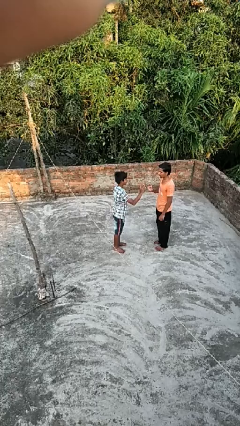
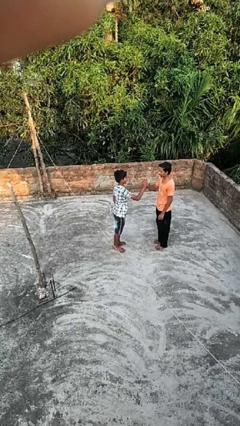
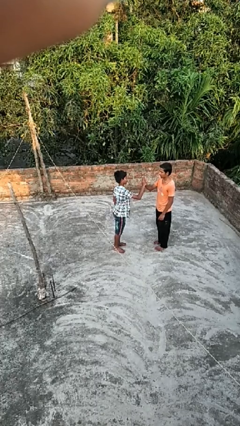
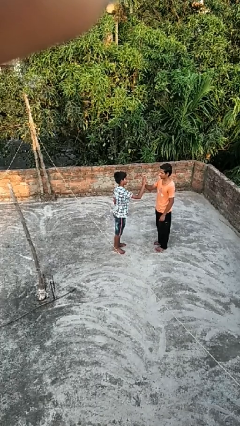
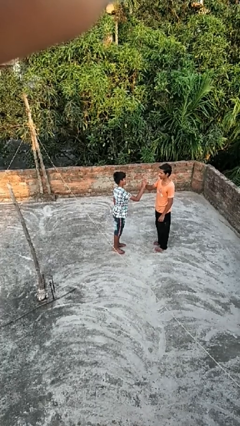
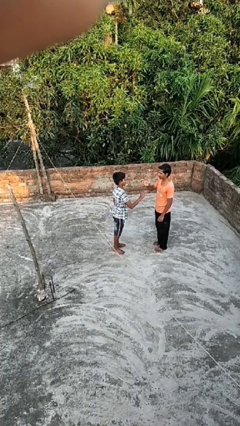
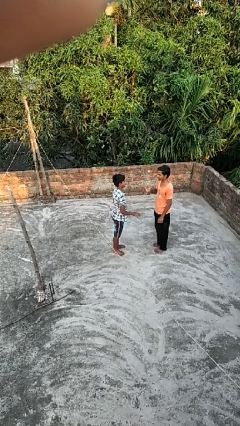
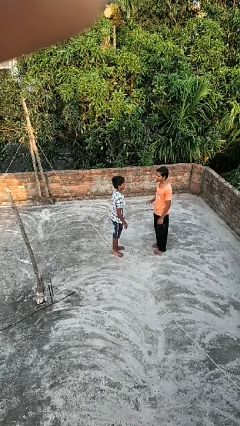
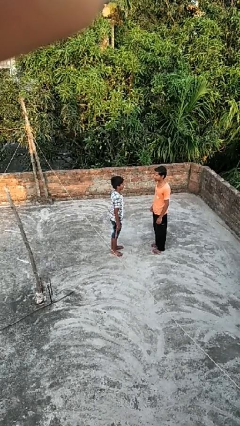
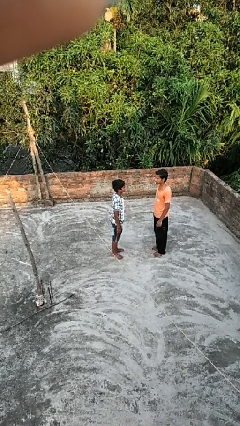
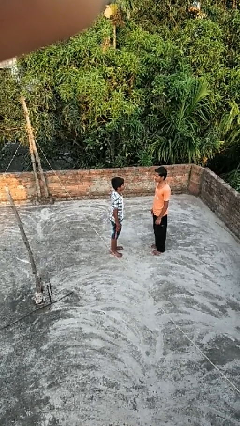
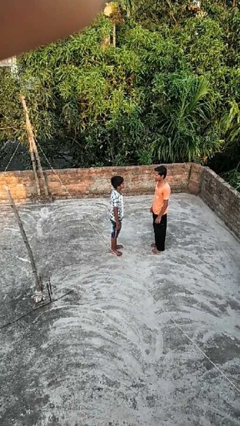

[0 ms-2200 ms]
person highfives hand

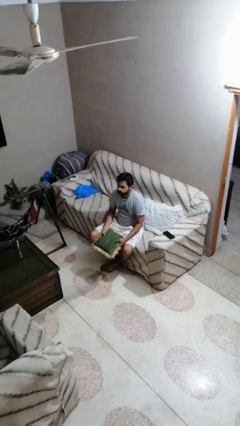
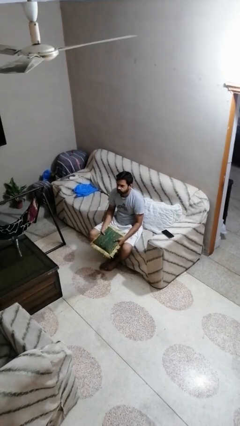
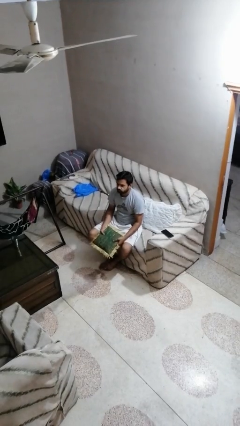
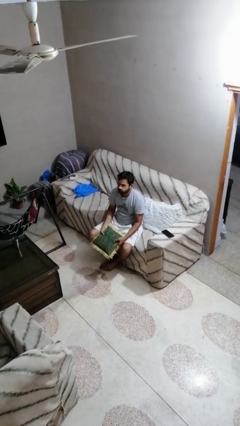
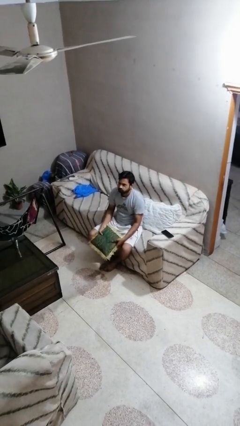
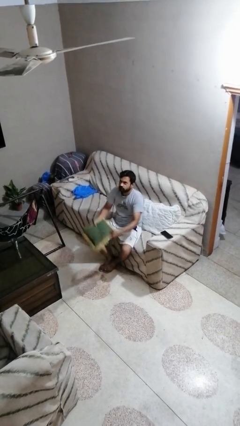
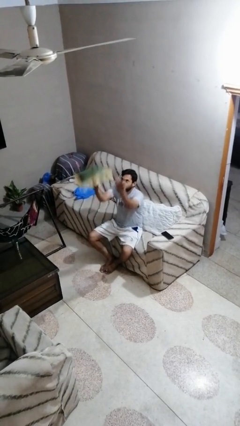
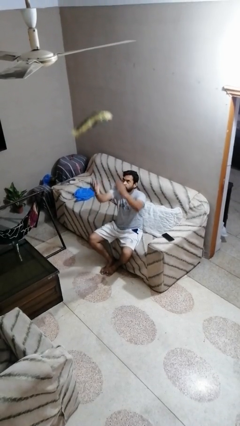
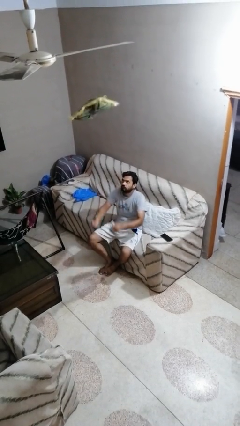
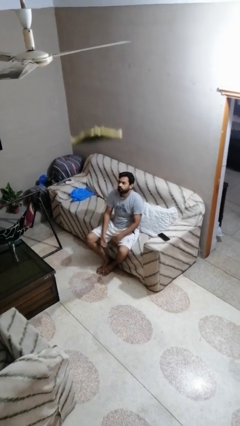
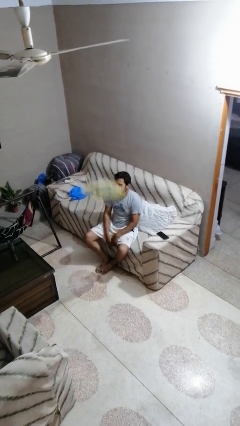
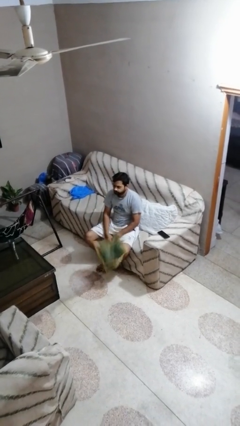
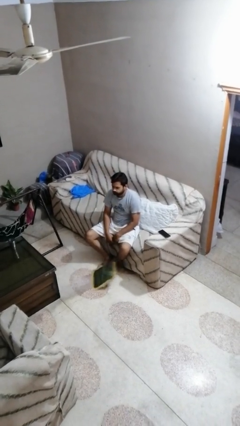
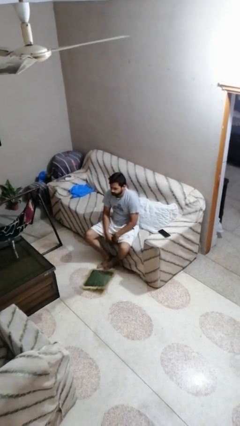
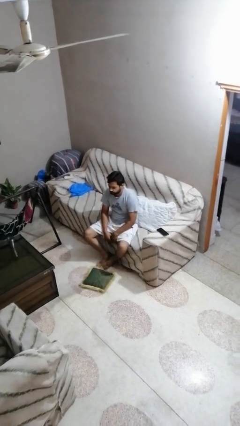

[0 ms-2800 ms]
person throws object into air

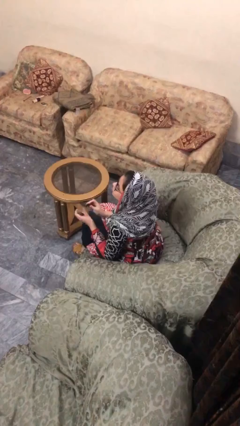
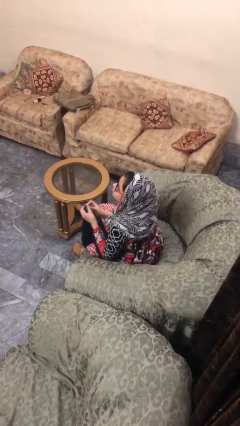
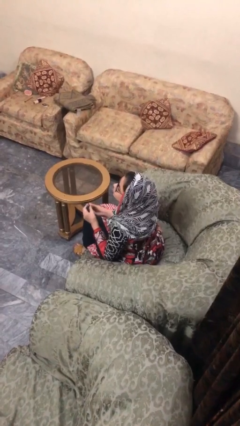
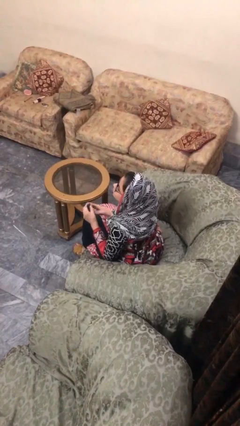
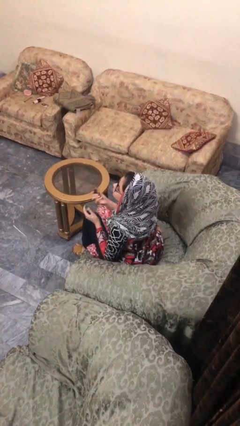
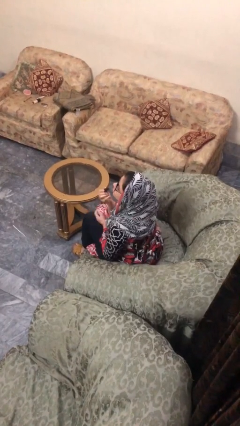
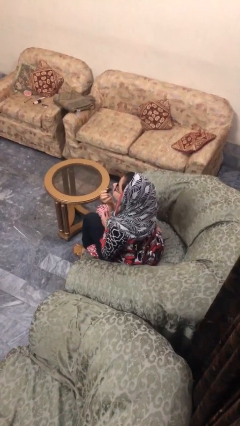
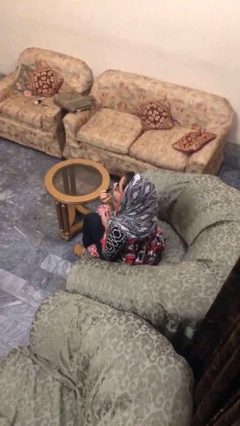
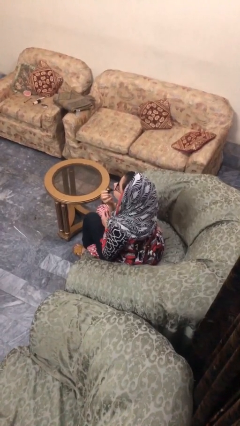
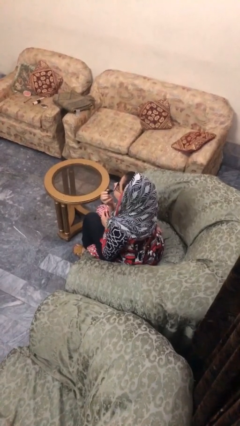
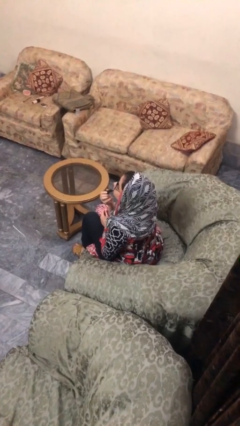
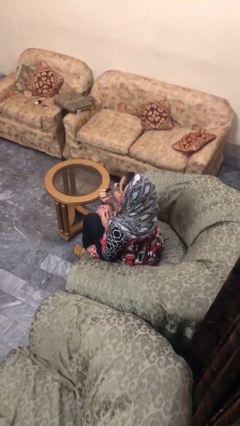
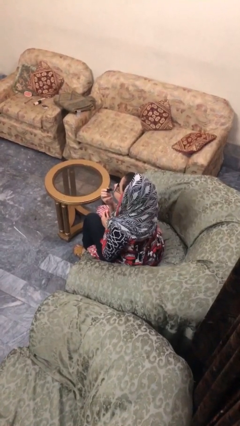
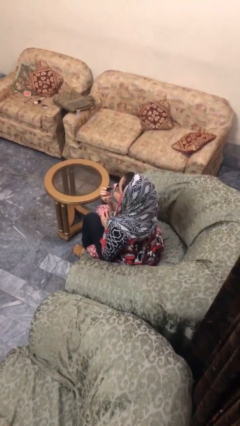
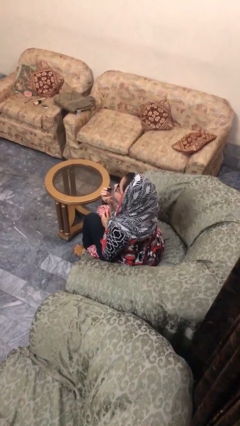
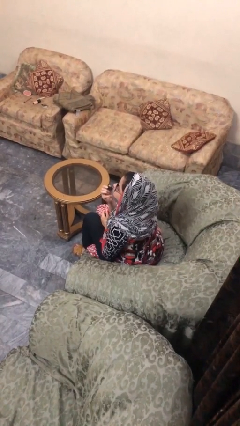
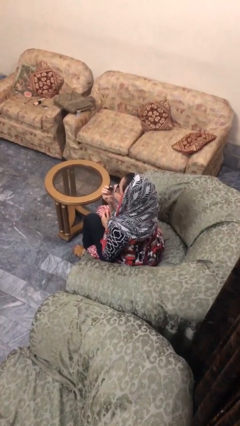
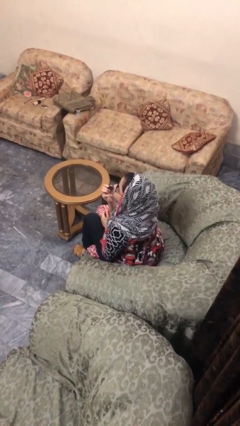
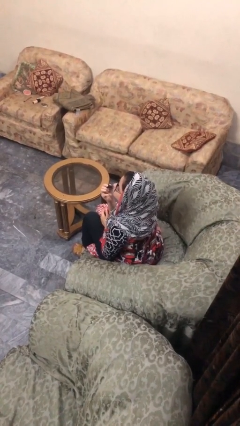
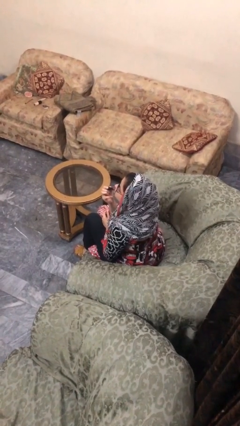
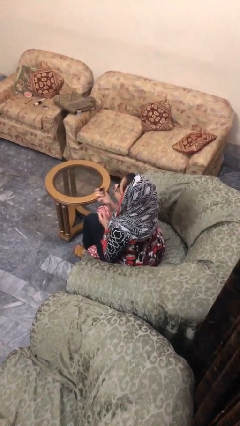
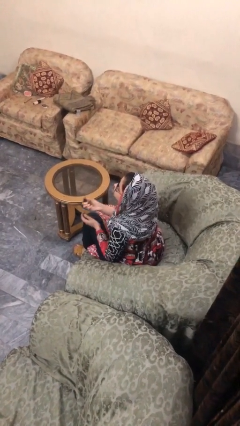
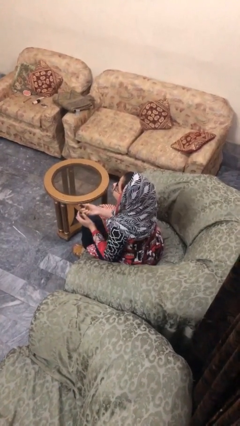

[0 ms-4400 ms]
person applies lip makeup

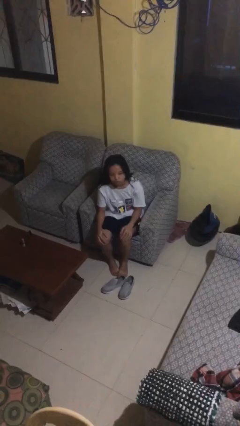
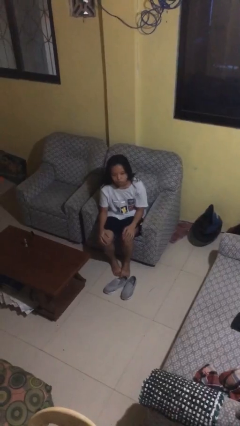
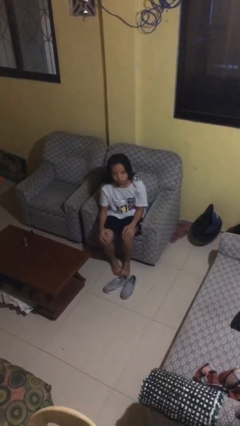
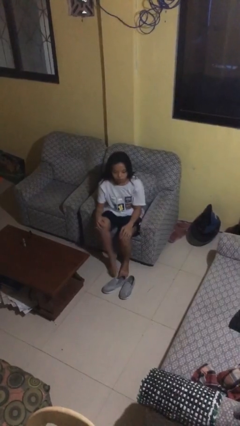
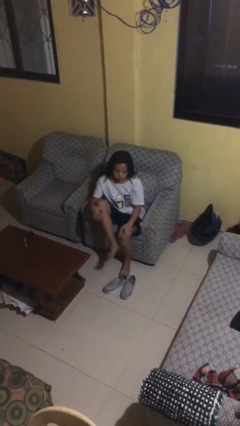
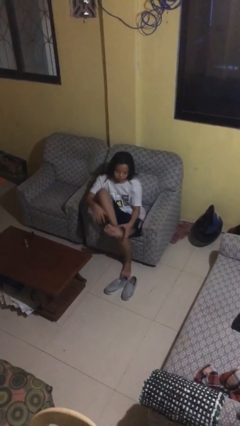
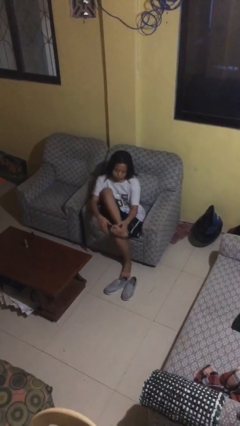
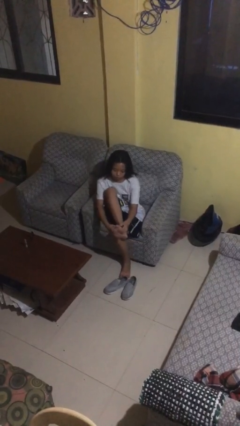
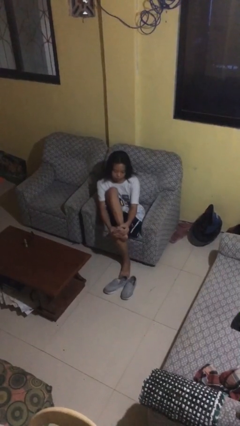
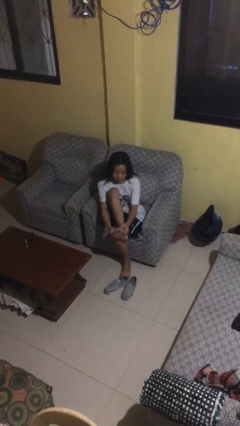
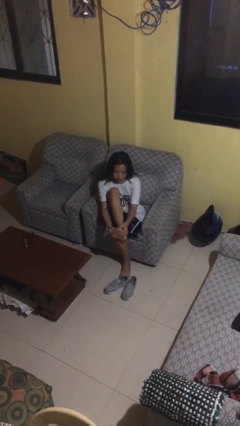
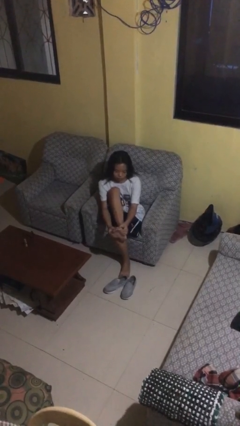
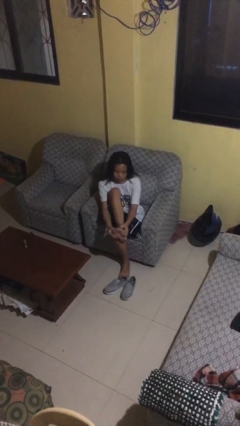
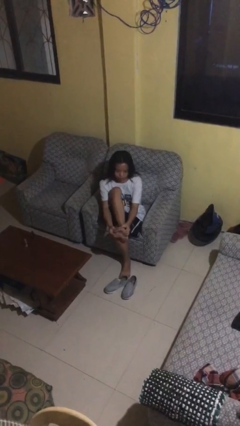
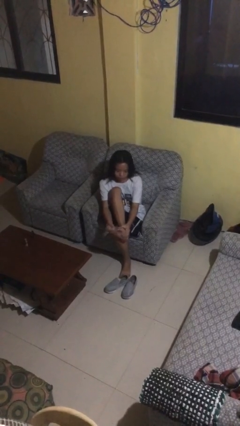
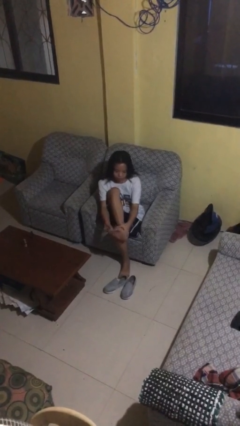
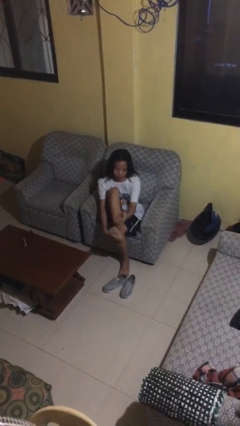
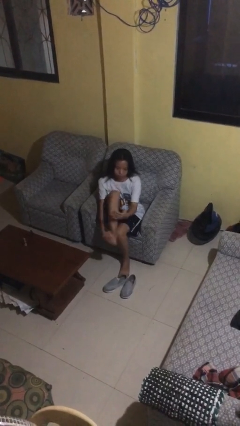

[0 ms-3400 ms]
person rubs foot

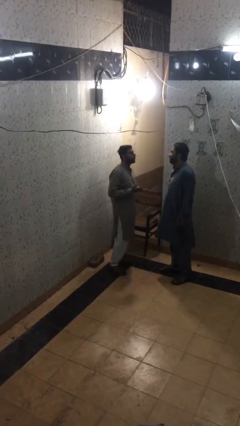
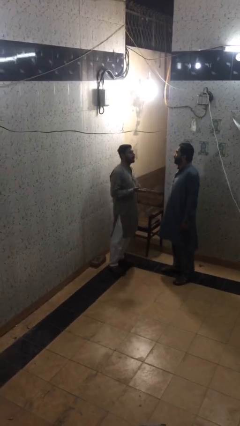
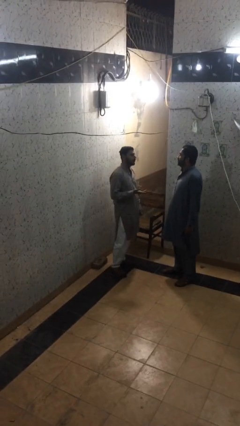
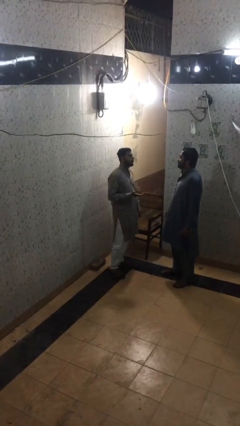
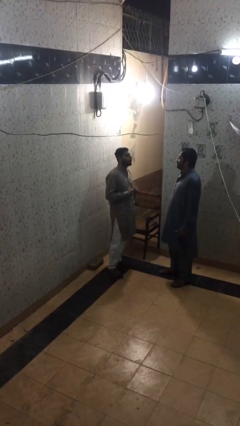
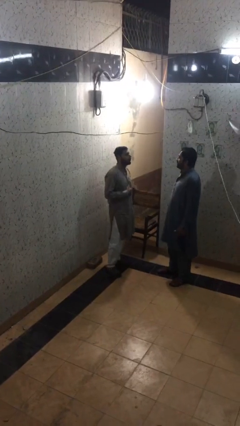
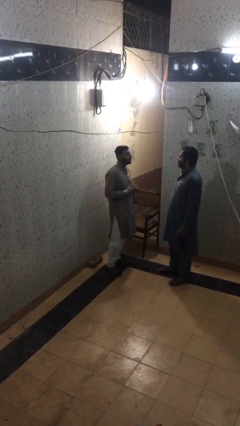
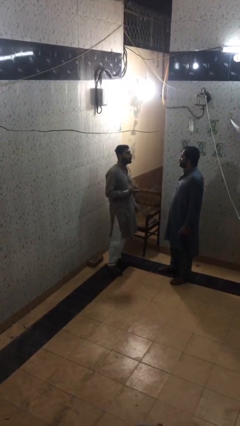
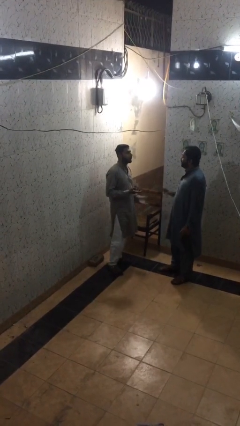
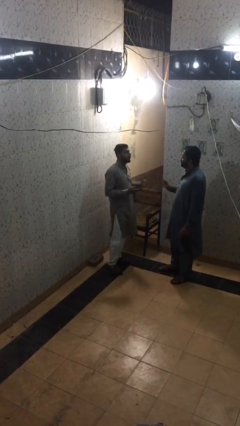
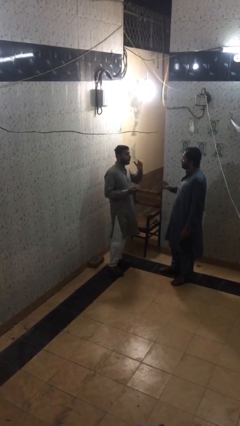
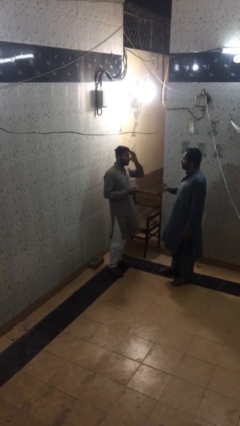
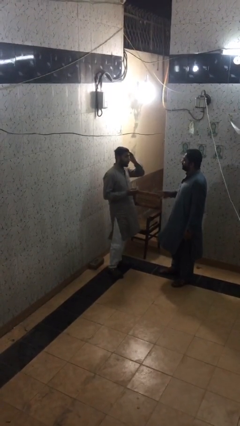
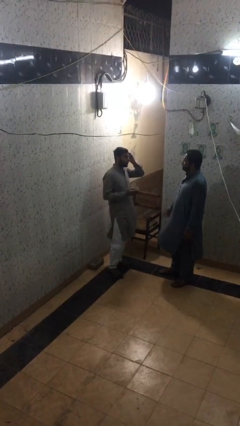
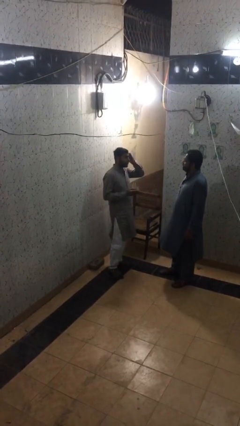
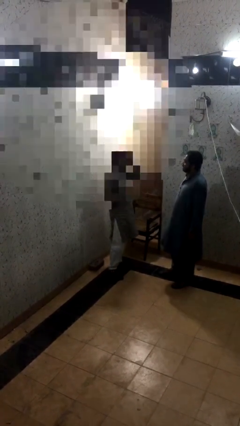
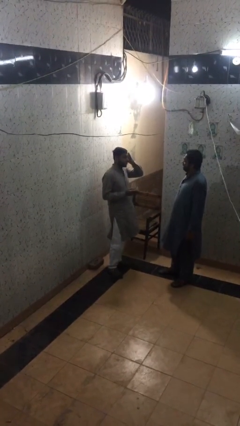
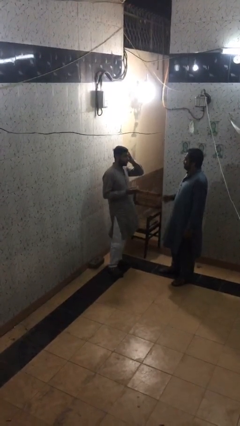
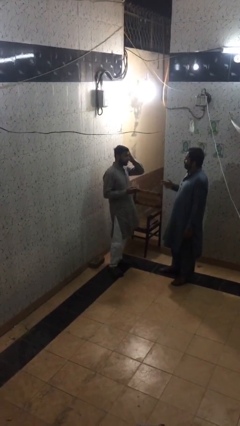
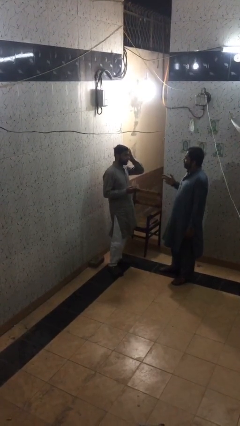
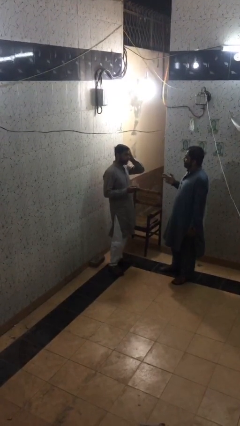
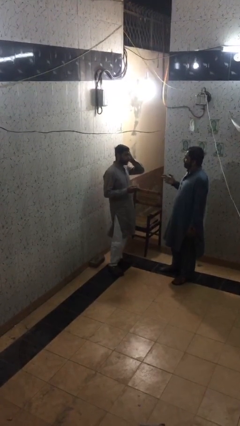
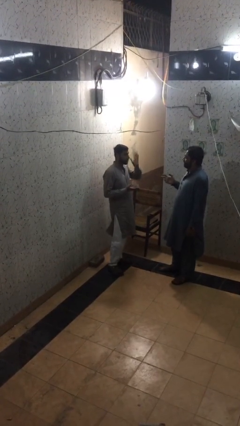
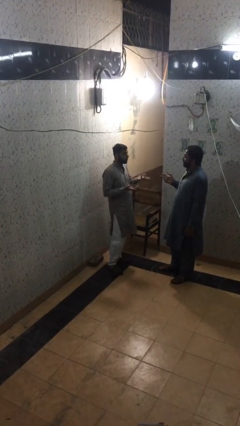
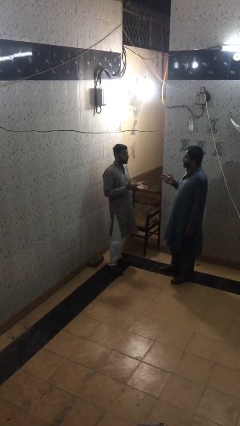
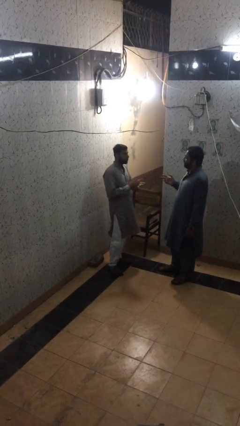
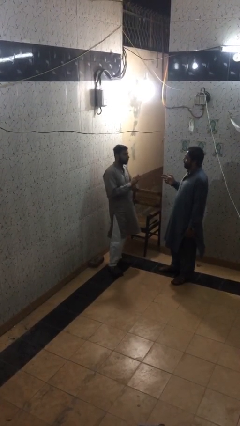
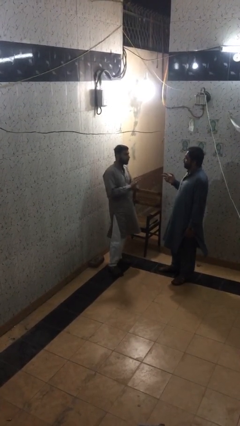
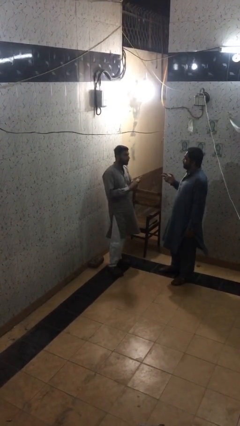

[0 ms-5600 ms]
person talks to person
